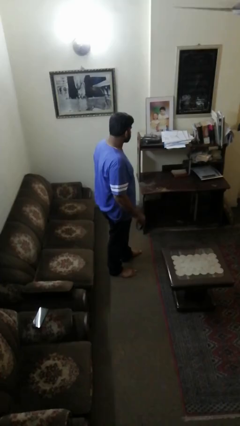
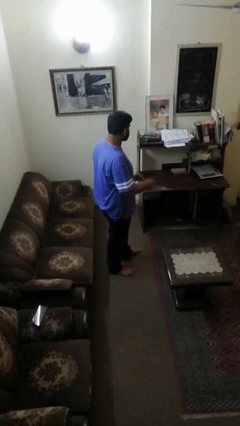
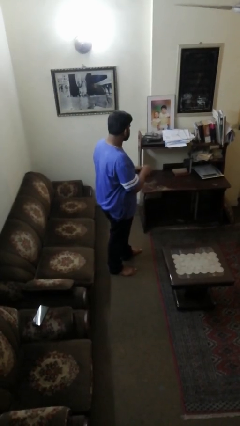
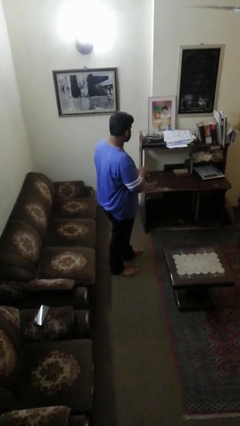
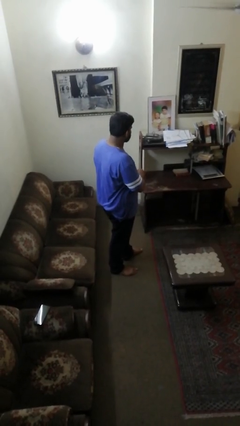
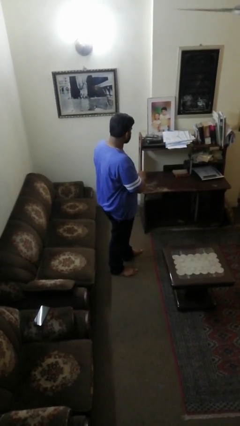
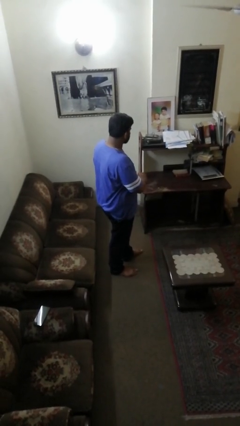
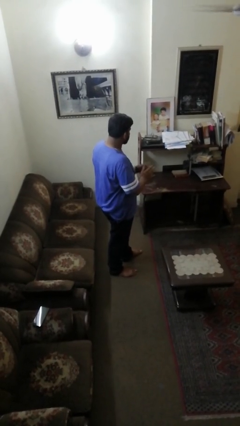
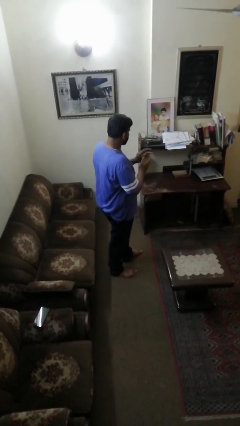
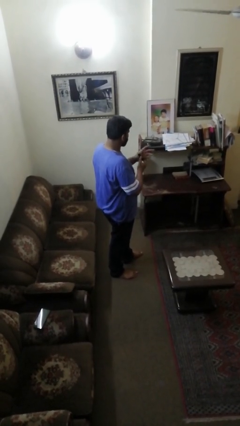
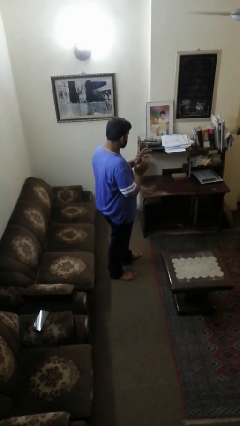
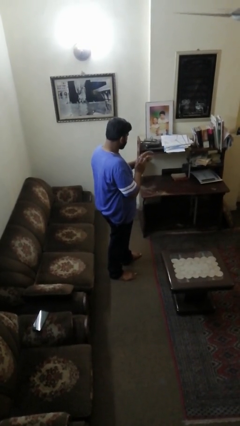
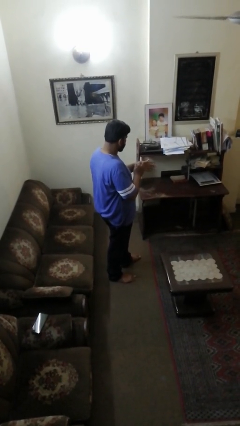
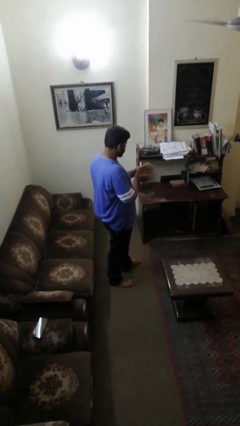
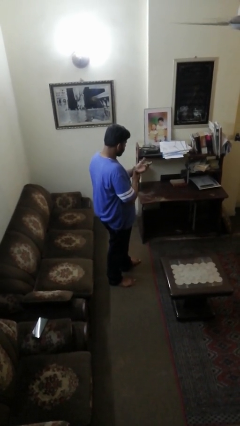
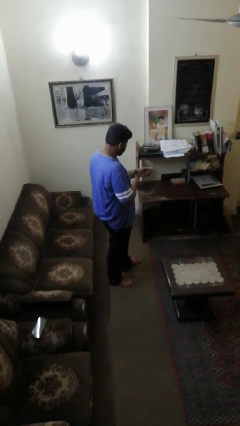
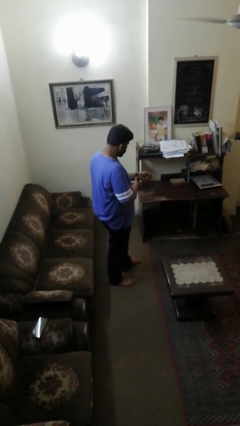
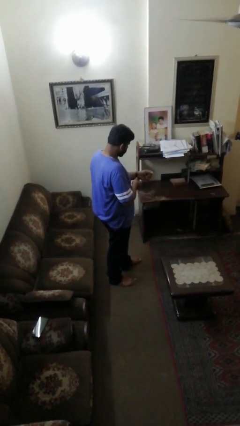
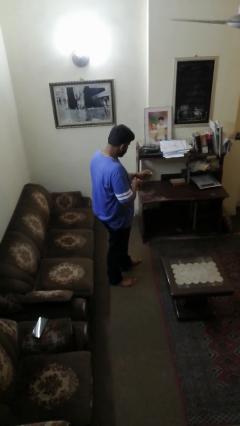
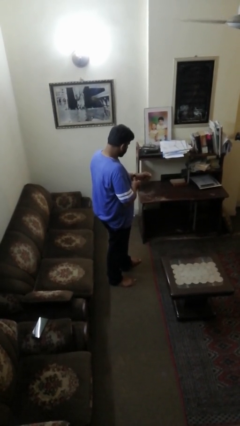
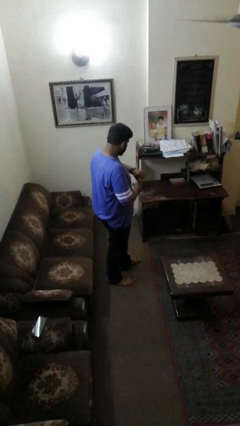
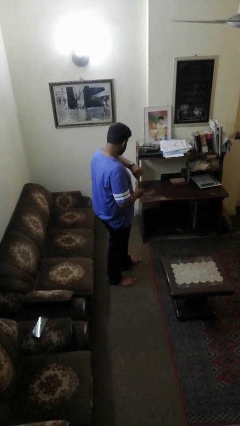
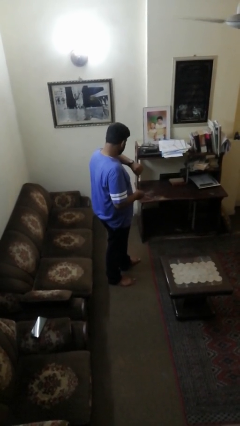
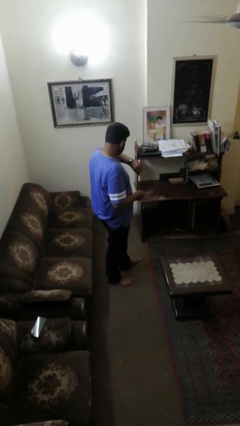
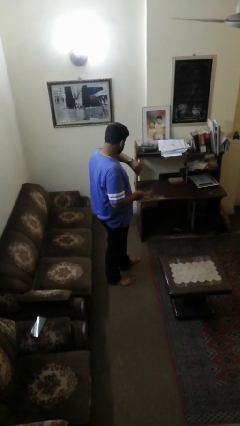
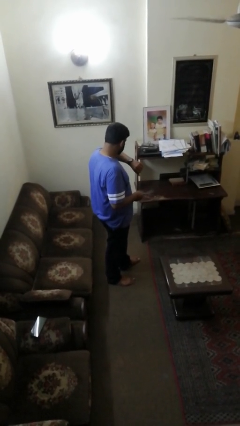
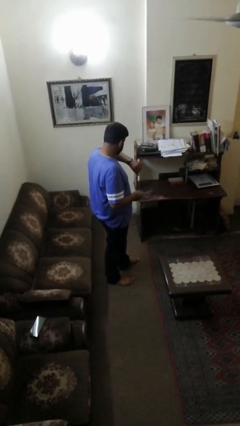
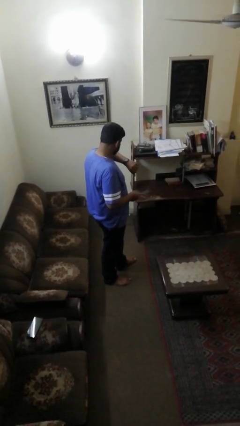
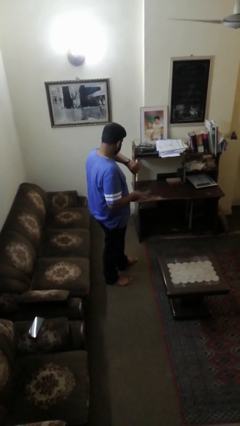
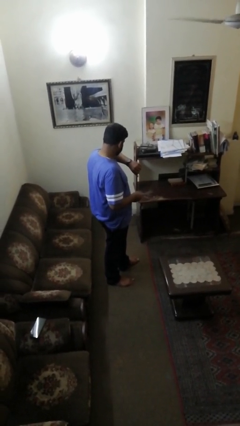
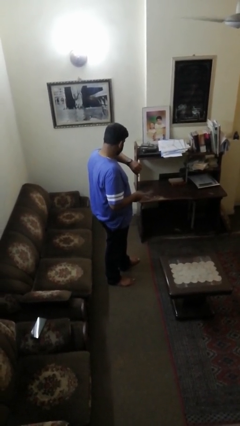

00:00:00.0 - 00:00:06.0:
person puts on wristwatch

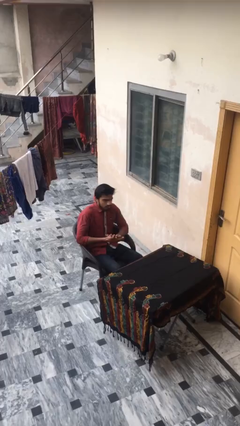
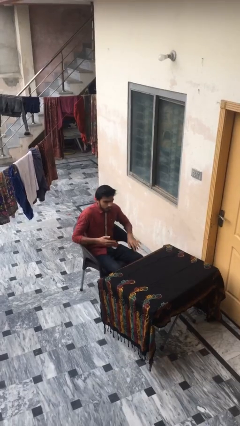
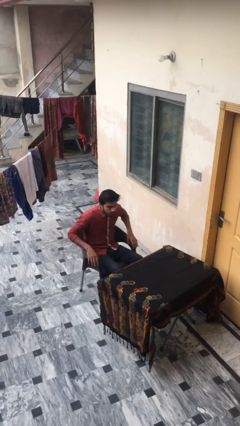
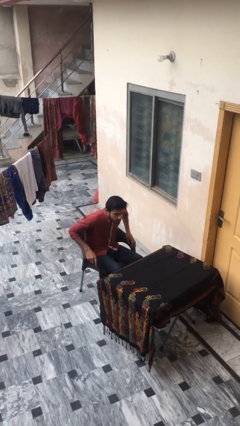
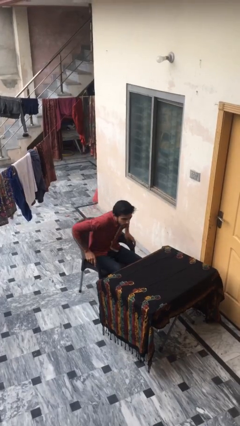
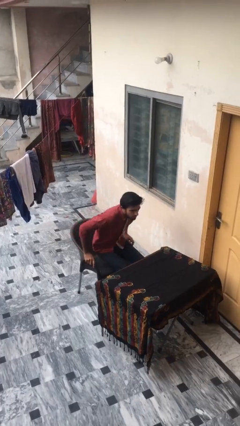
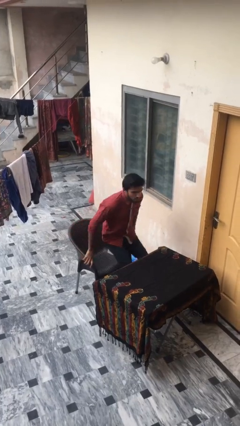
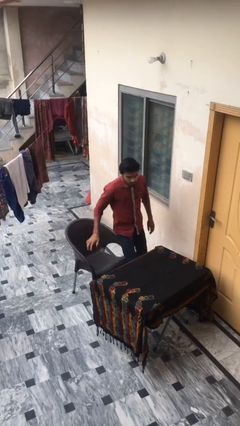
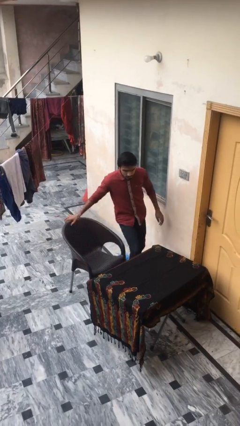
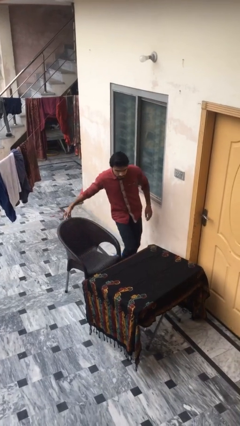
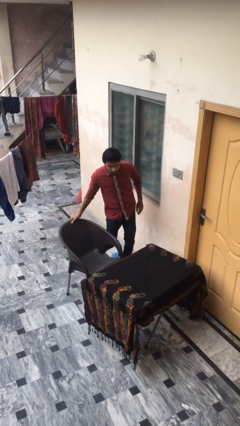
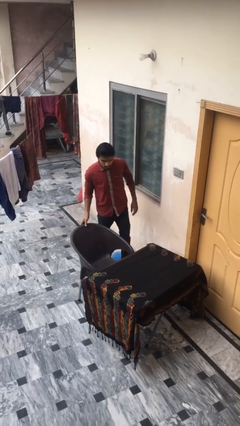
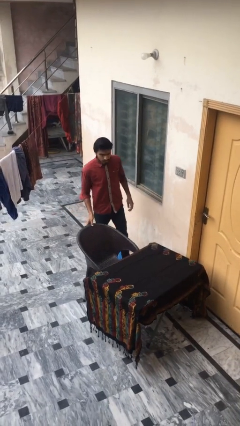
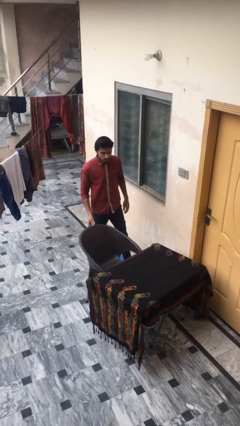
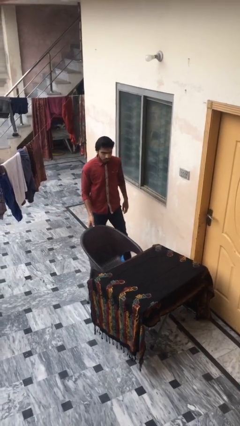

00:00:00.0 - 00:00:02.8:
person stands up

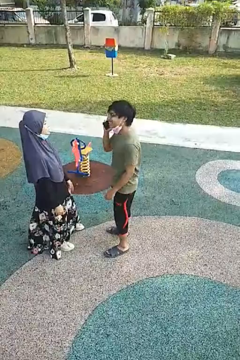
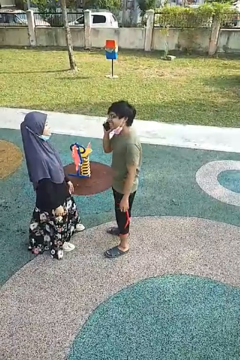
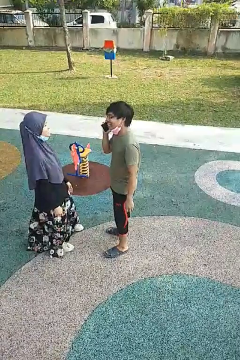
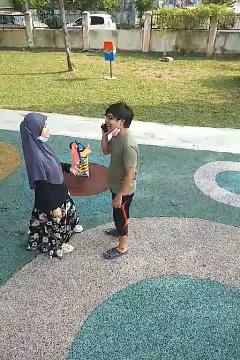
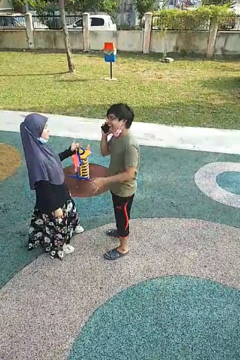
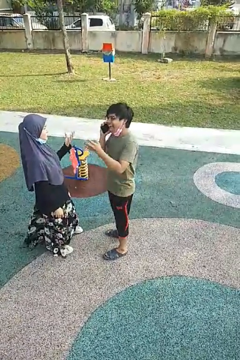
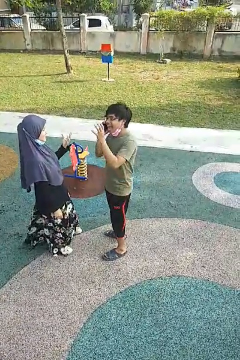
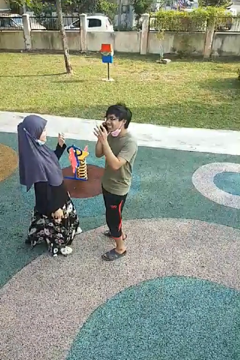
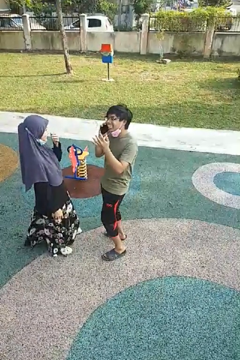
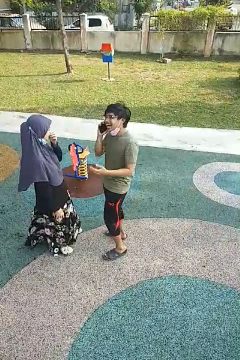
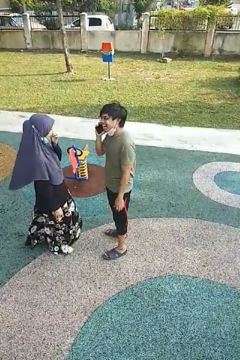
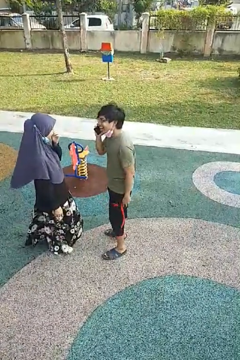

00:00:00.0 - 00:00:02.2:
person laughs with person

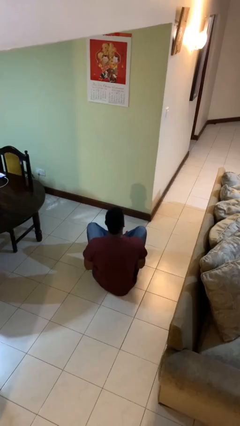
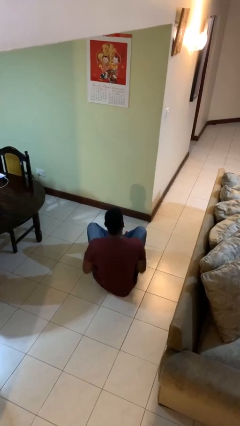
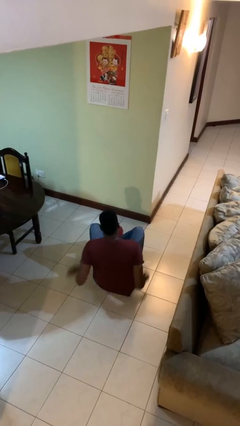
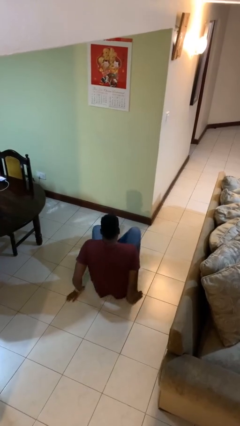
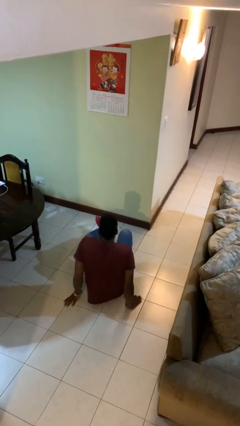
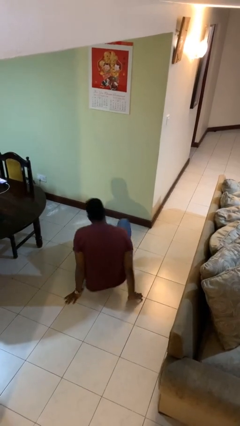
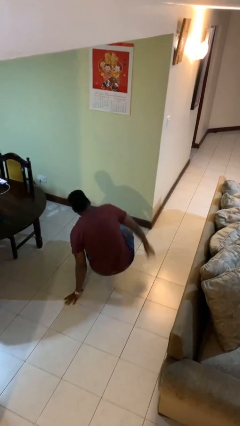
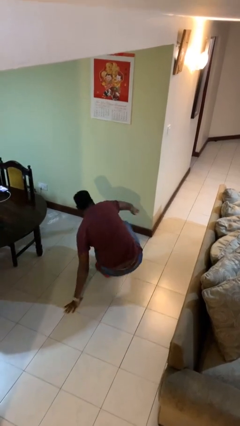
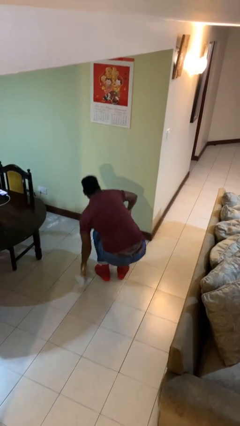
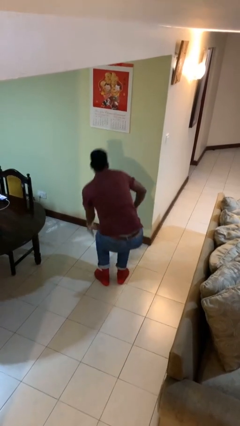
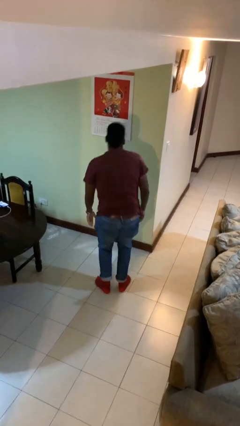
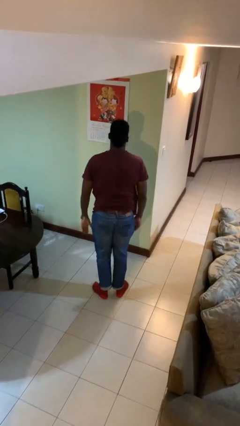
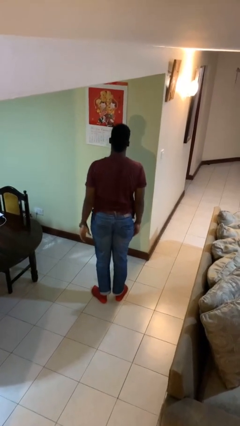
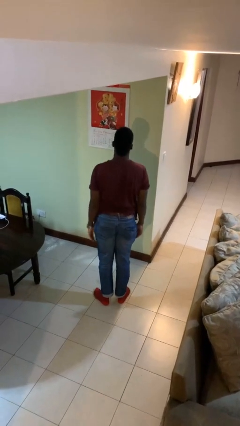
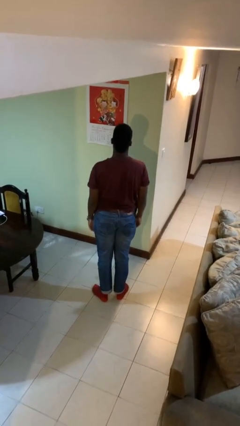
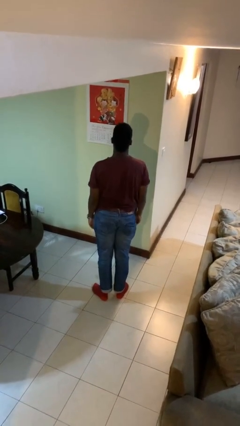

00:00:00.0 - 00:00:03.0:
person stands up from floor

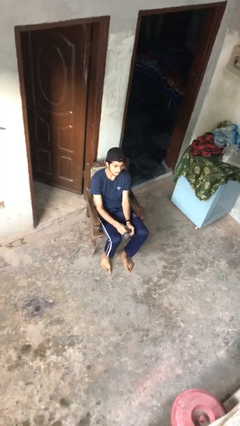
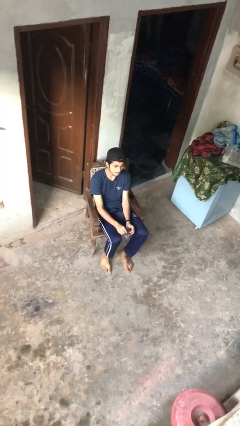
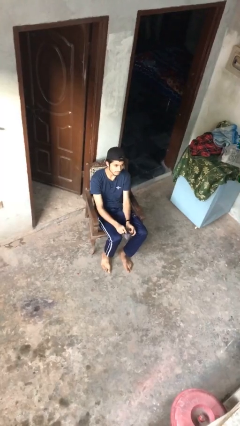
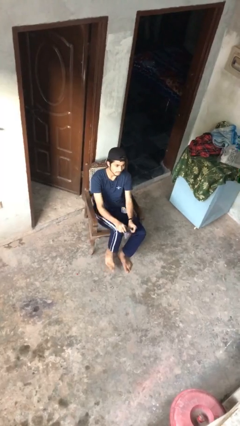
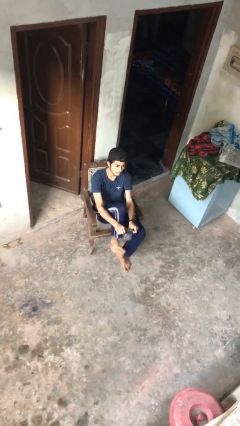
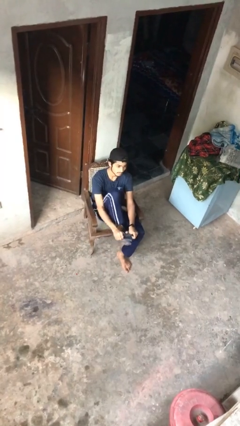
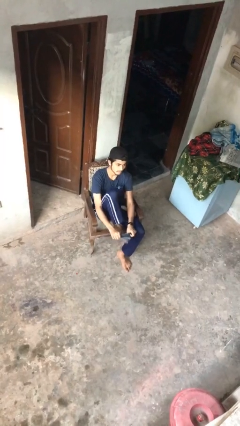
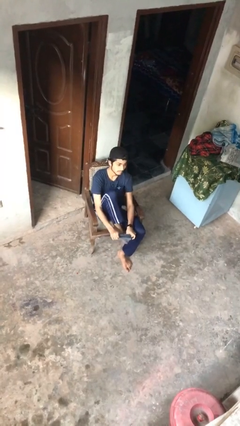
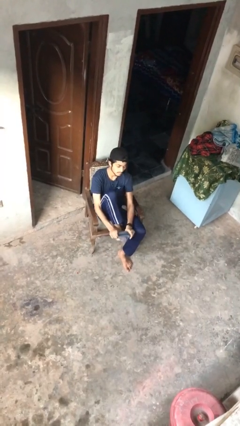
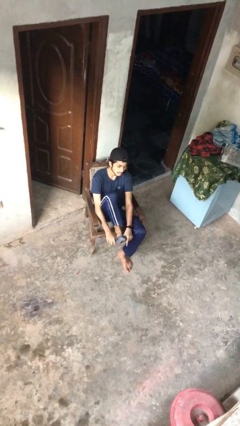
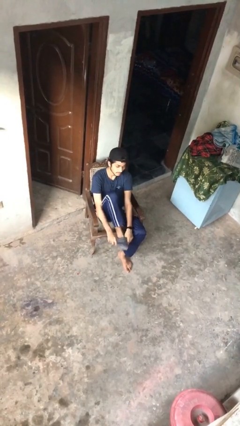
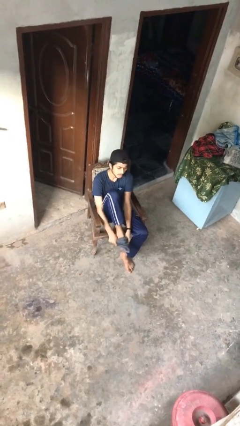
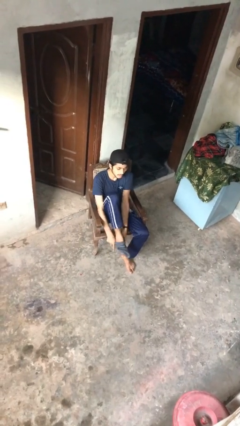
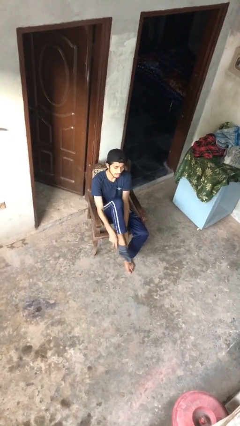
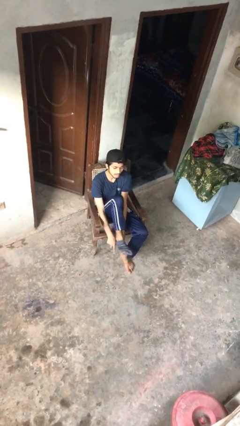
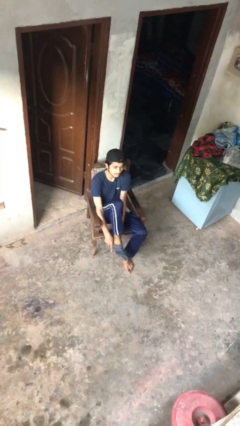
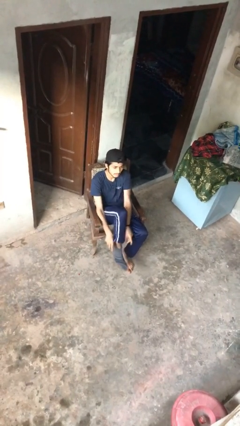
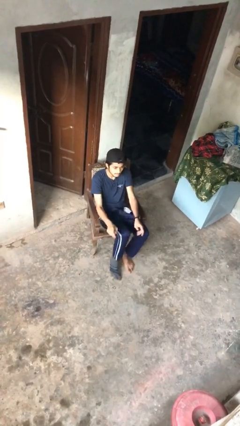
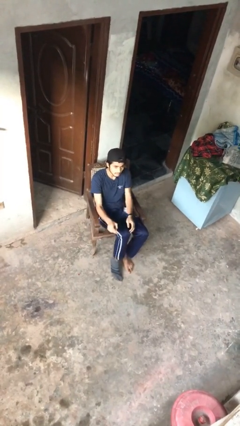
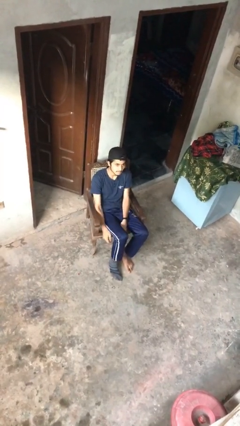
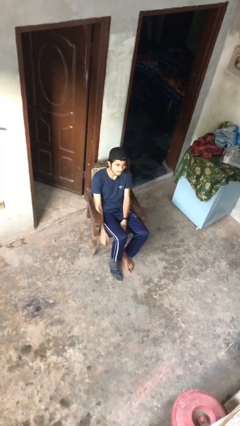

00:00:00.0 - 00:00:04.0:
person puts on socks

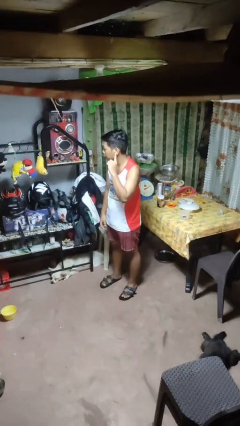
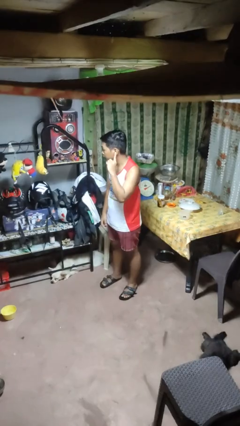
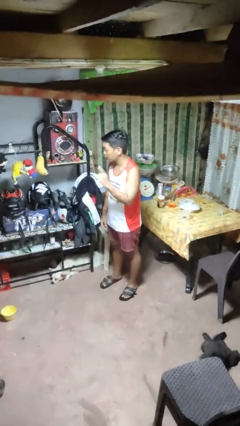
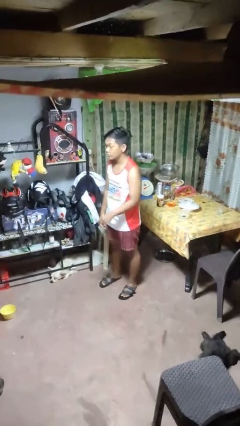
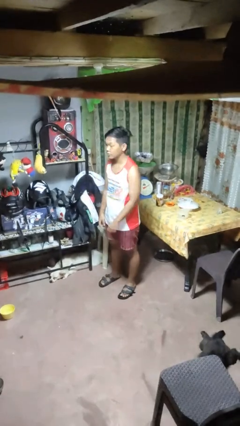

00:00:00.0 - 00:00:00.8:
person gestures listen closely
